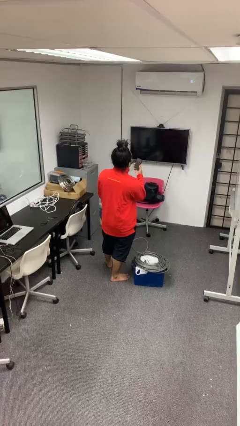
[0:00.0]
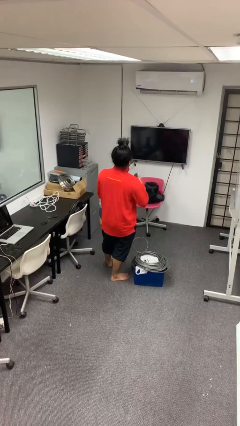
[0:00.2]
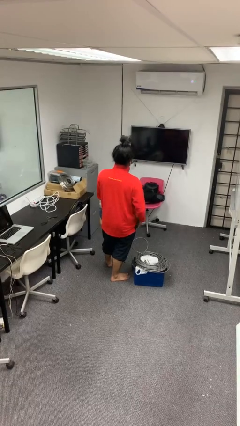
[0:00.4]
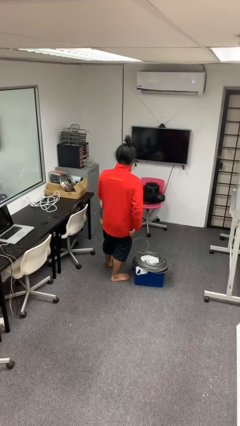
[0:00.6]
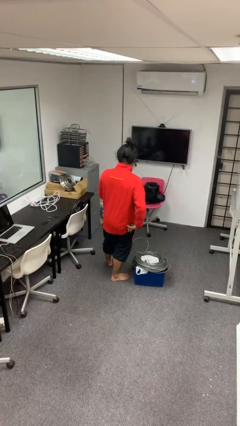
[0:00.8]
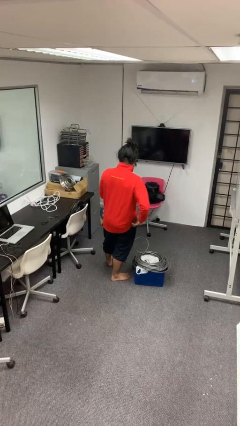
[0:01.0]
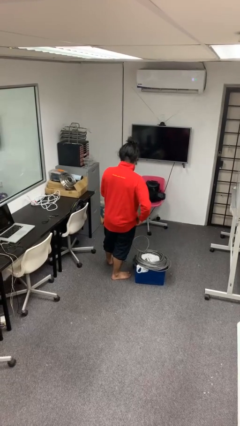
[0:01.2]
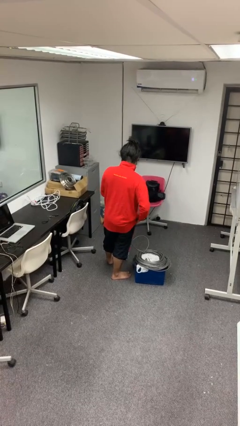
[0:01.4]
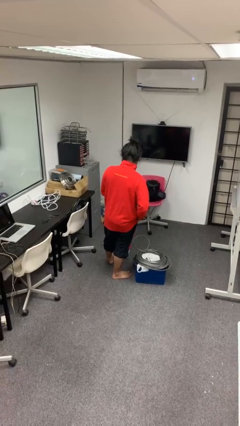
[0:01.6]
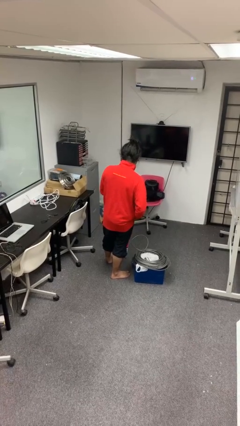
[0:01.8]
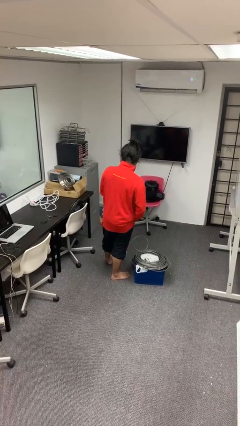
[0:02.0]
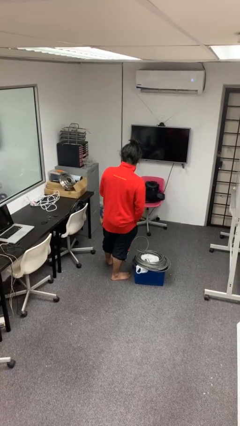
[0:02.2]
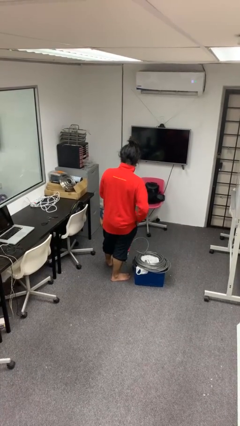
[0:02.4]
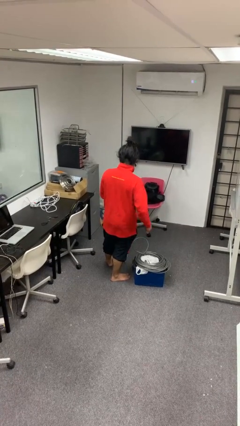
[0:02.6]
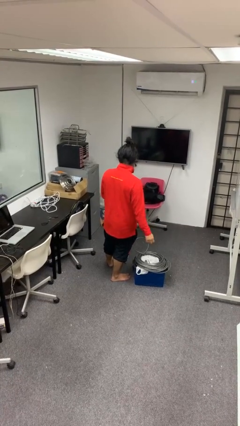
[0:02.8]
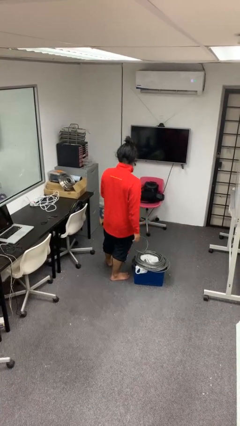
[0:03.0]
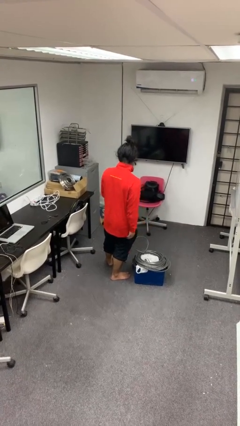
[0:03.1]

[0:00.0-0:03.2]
person puts phone into pocket

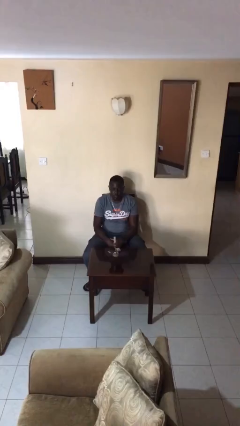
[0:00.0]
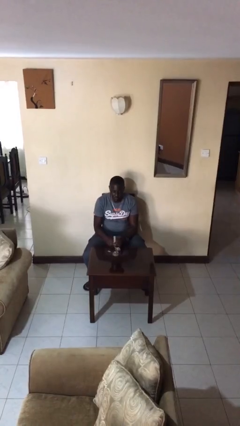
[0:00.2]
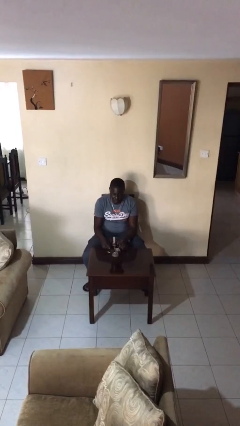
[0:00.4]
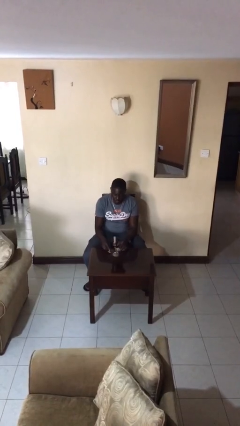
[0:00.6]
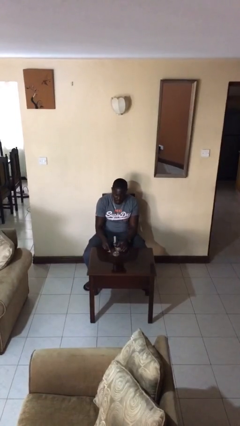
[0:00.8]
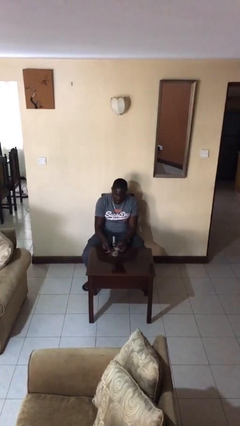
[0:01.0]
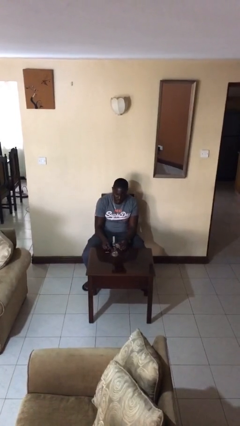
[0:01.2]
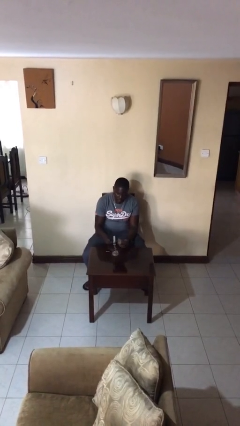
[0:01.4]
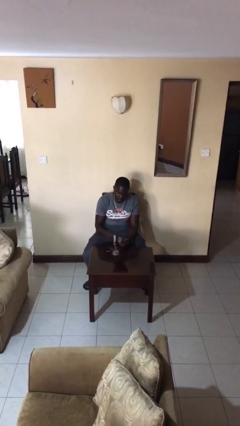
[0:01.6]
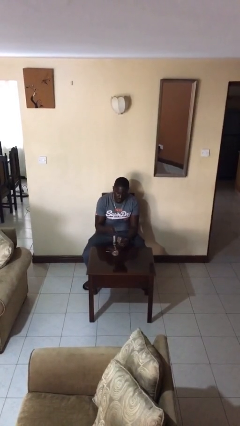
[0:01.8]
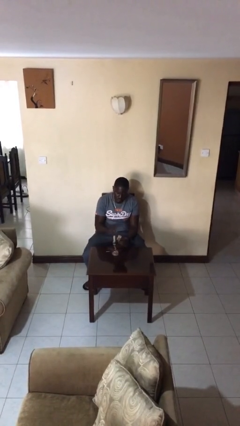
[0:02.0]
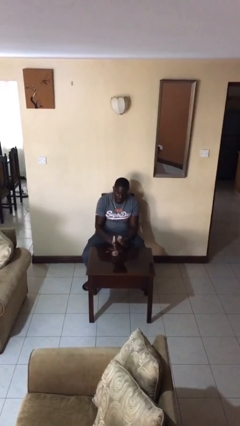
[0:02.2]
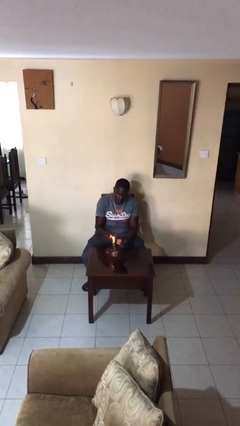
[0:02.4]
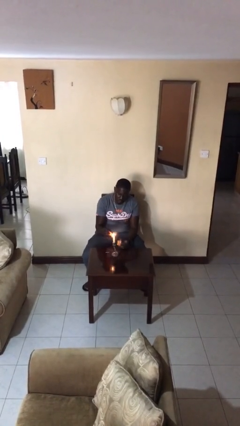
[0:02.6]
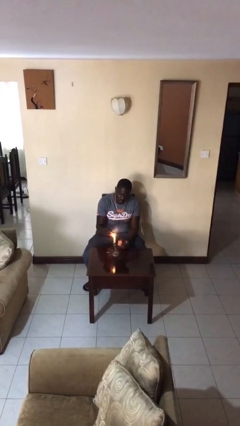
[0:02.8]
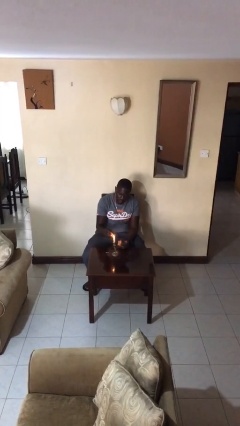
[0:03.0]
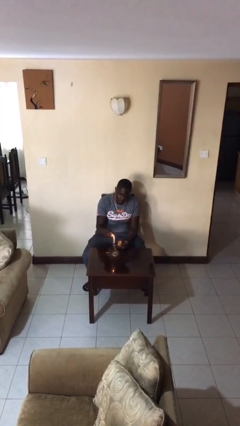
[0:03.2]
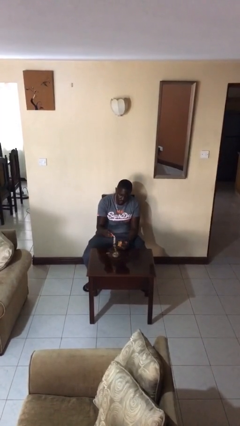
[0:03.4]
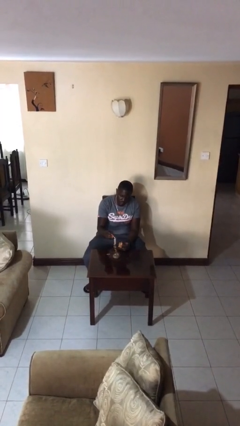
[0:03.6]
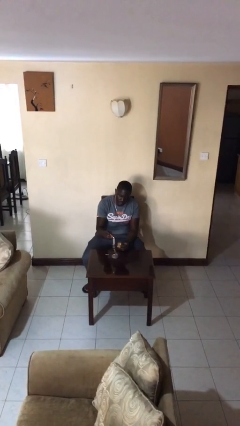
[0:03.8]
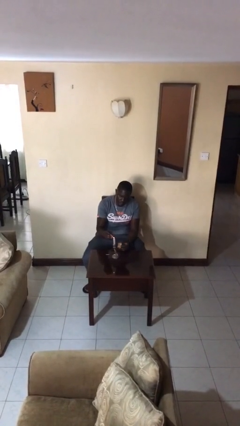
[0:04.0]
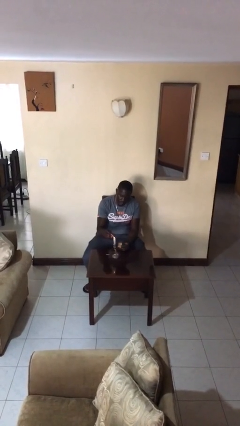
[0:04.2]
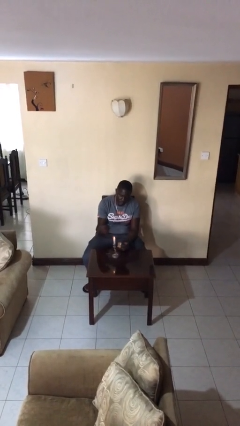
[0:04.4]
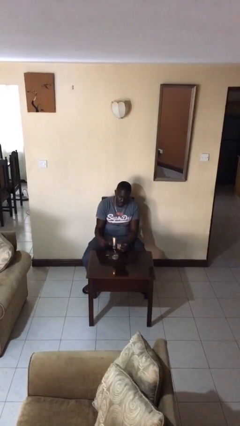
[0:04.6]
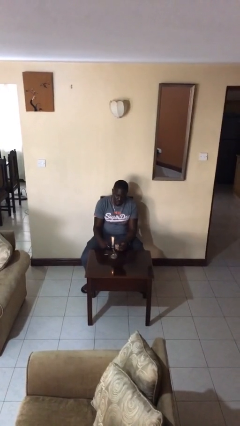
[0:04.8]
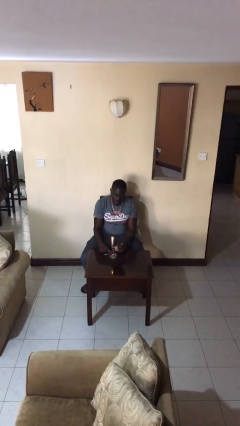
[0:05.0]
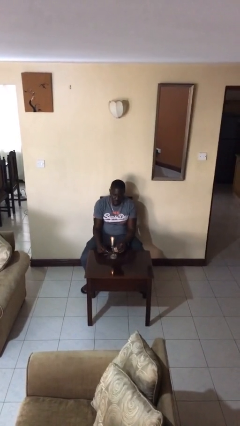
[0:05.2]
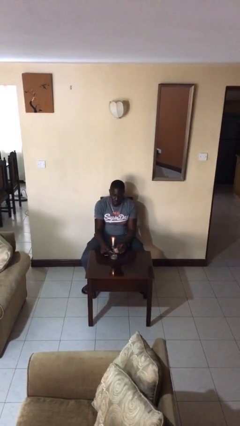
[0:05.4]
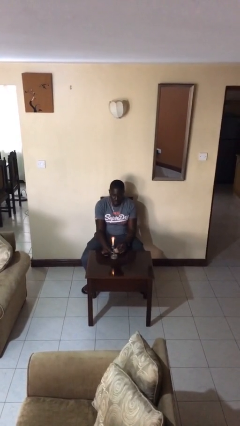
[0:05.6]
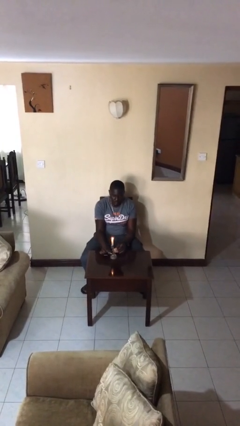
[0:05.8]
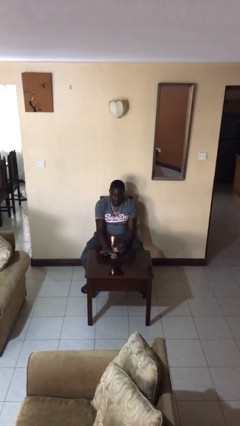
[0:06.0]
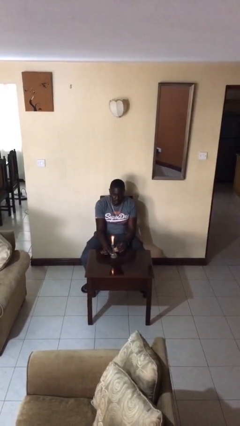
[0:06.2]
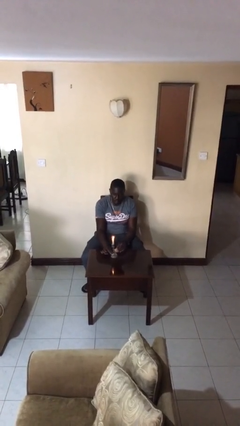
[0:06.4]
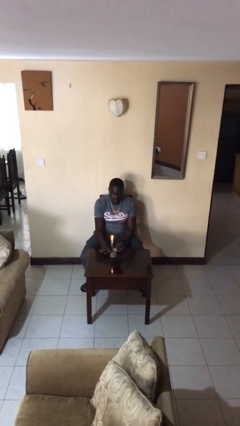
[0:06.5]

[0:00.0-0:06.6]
person lights candle

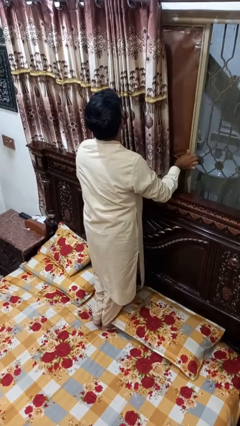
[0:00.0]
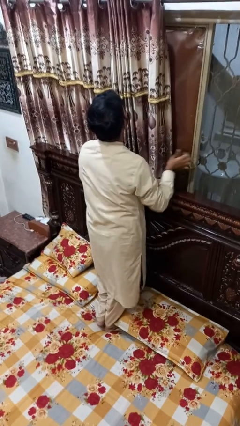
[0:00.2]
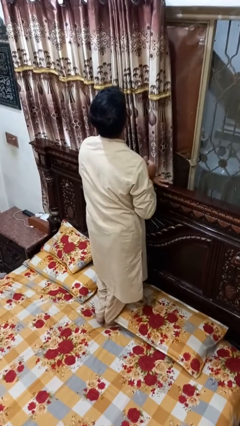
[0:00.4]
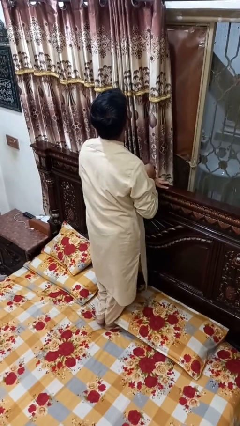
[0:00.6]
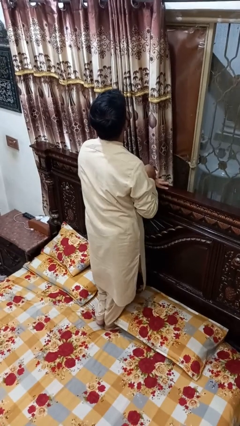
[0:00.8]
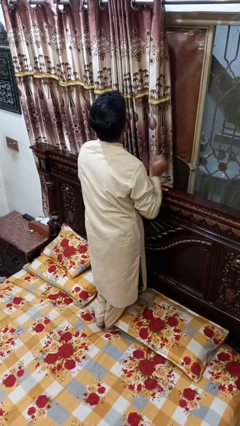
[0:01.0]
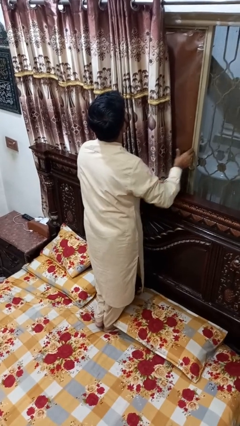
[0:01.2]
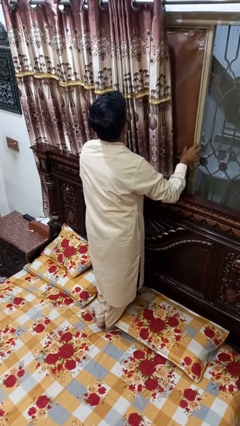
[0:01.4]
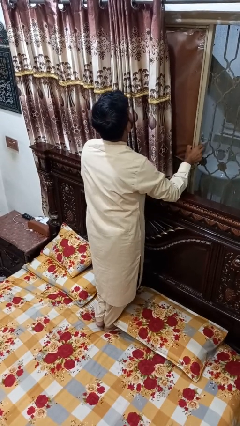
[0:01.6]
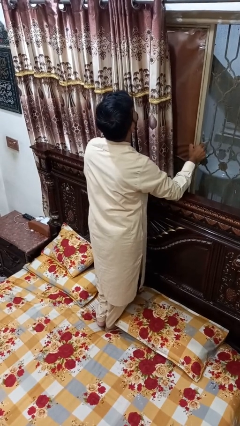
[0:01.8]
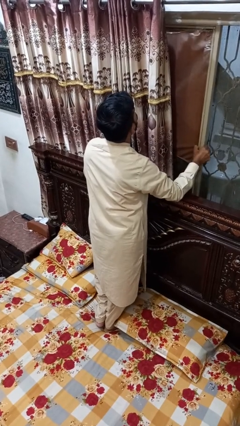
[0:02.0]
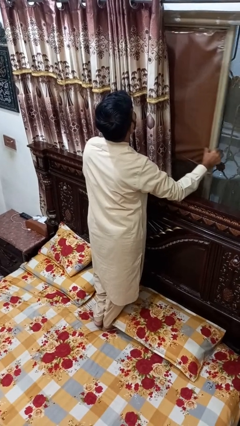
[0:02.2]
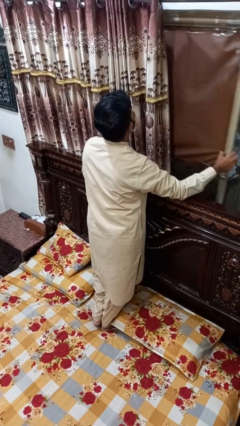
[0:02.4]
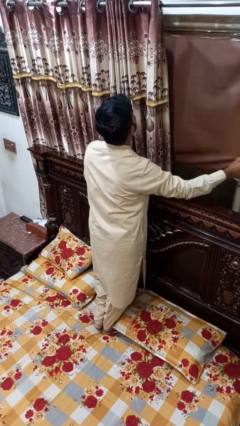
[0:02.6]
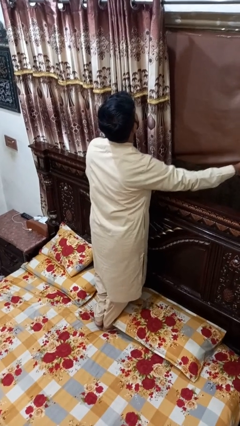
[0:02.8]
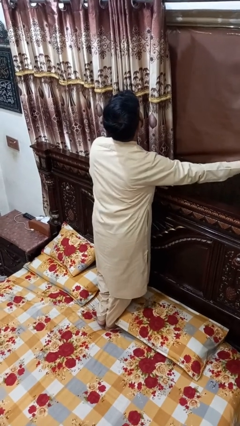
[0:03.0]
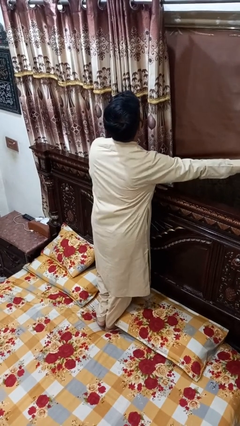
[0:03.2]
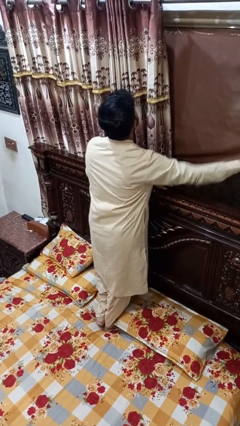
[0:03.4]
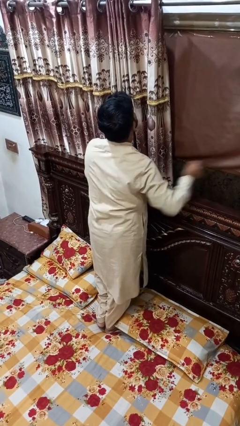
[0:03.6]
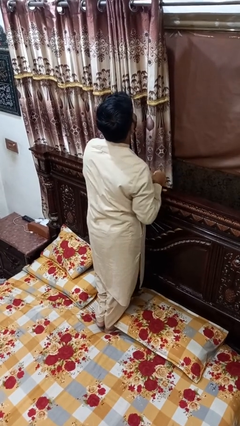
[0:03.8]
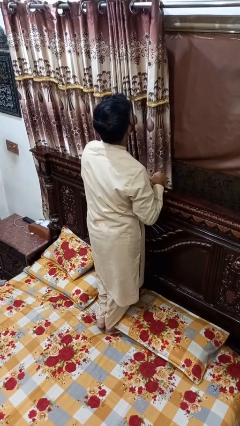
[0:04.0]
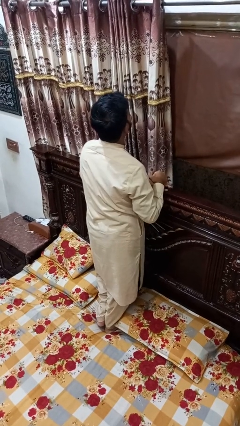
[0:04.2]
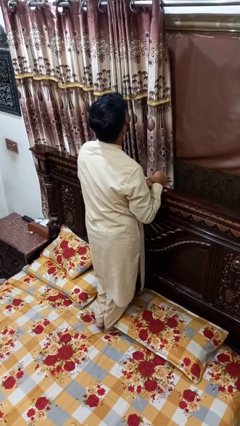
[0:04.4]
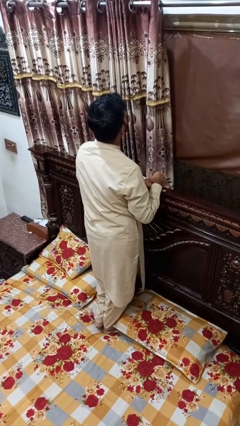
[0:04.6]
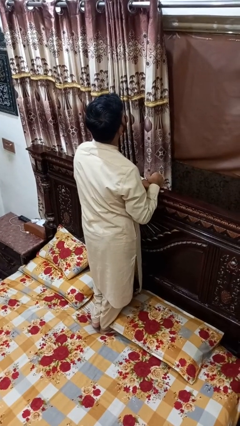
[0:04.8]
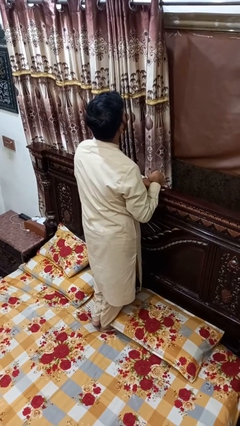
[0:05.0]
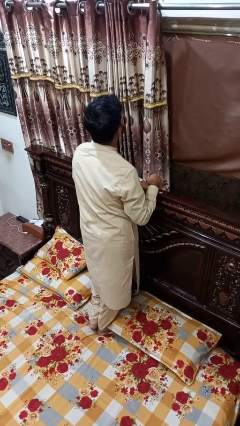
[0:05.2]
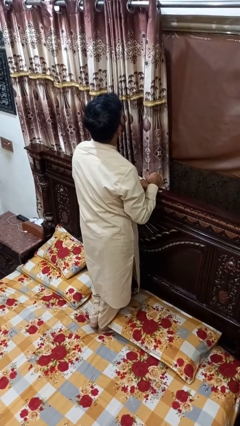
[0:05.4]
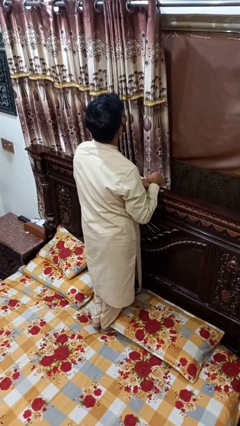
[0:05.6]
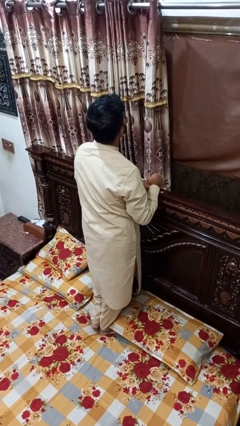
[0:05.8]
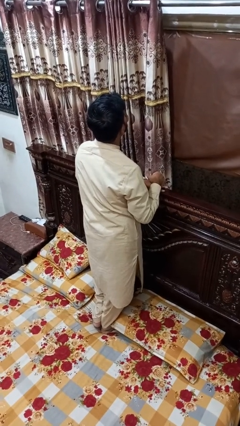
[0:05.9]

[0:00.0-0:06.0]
person closes home window

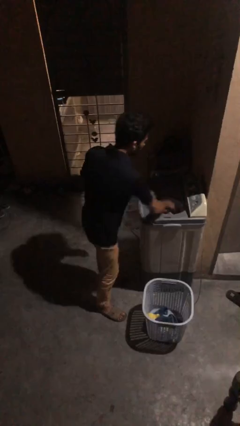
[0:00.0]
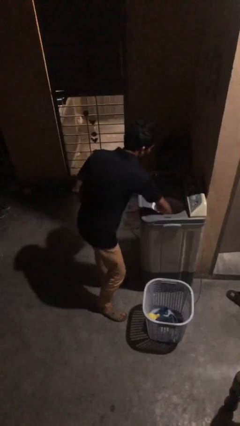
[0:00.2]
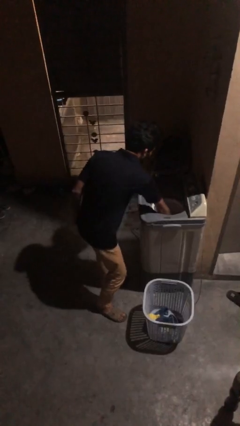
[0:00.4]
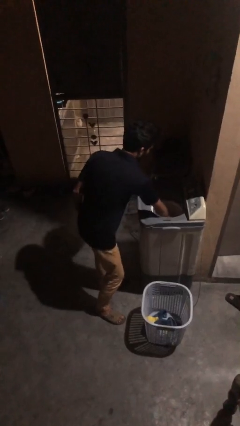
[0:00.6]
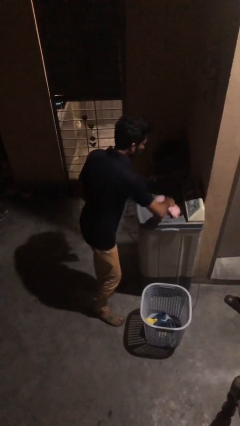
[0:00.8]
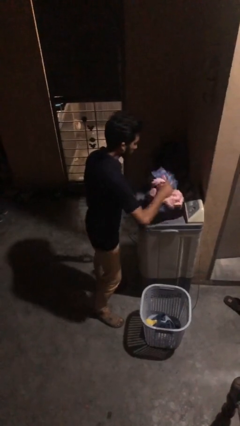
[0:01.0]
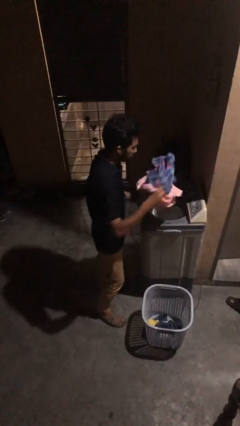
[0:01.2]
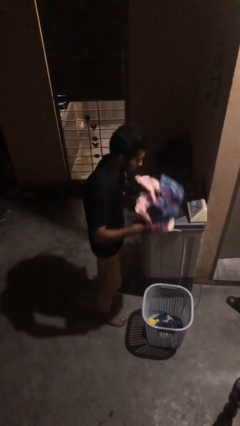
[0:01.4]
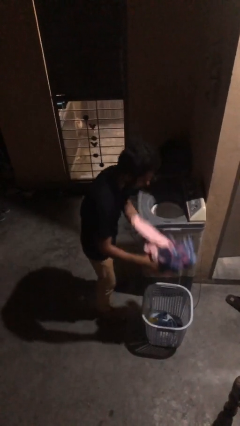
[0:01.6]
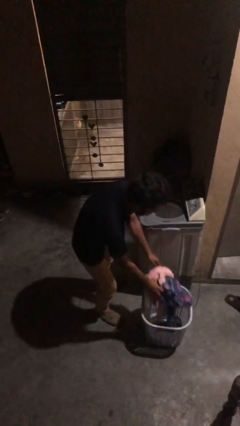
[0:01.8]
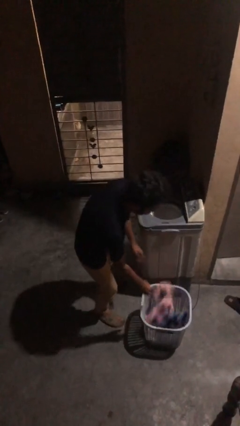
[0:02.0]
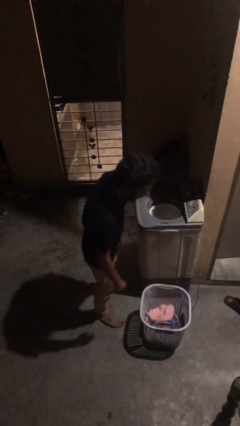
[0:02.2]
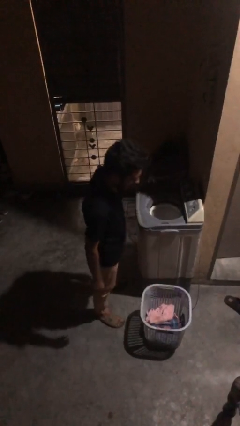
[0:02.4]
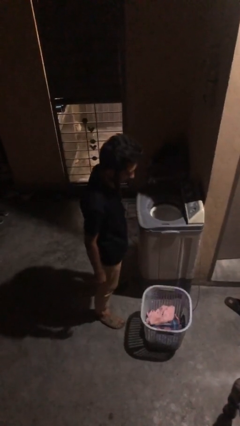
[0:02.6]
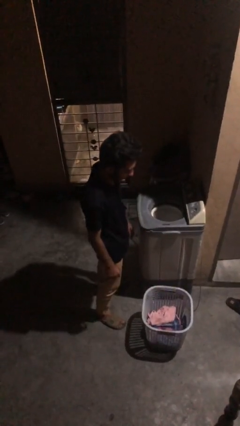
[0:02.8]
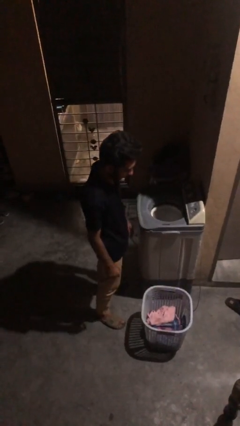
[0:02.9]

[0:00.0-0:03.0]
person unloads dryer
